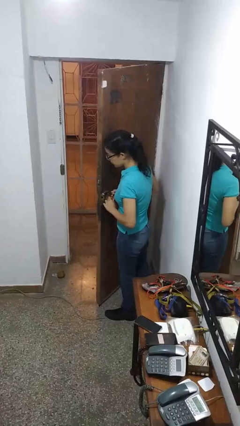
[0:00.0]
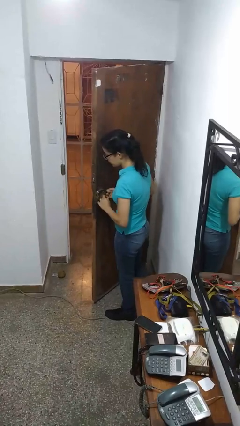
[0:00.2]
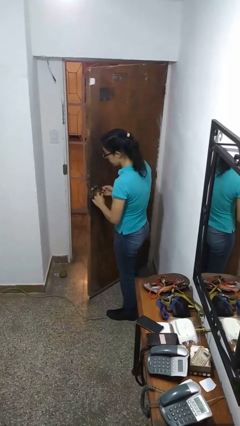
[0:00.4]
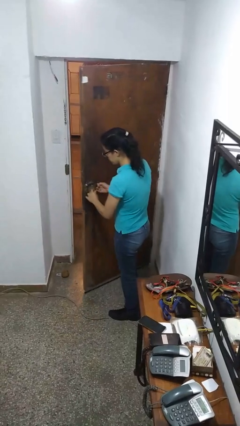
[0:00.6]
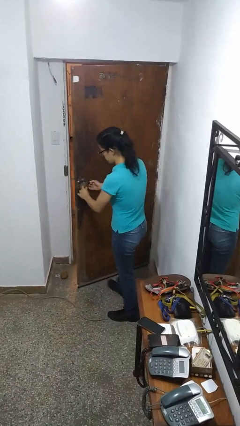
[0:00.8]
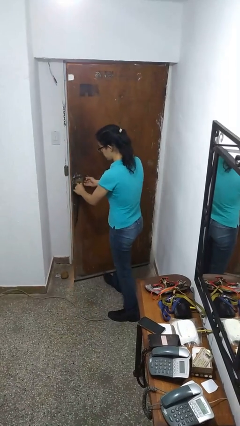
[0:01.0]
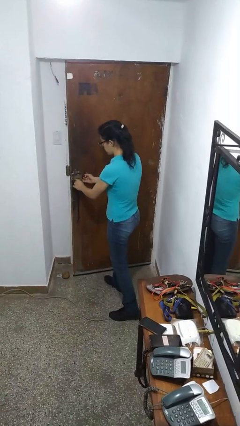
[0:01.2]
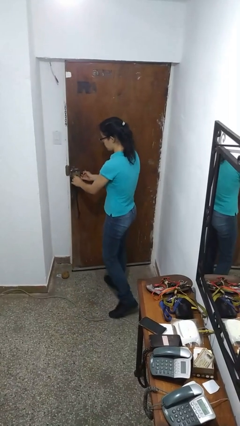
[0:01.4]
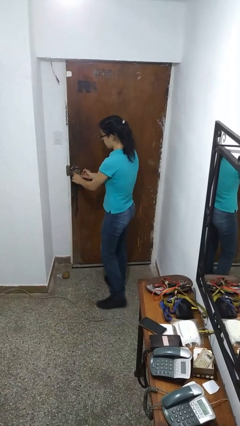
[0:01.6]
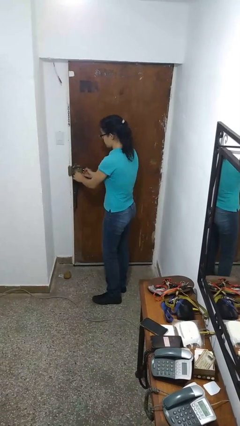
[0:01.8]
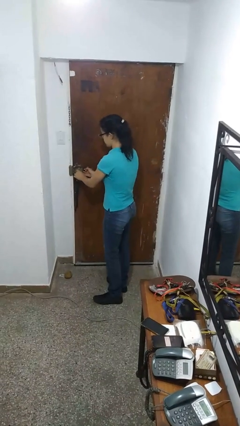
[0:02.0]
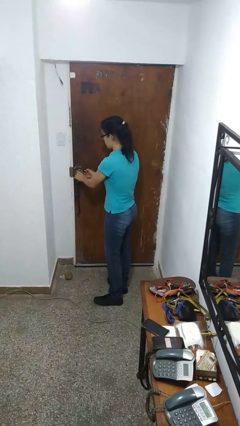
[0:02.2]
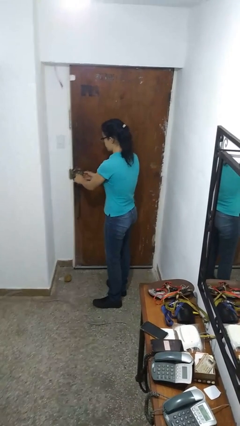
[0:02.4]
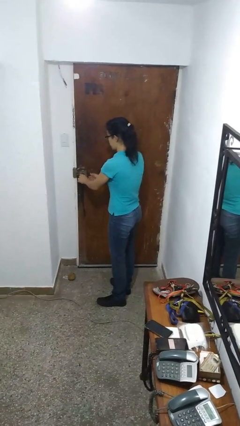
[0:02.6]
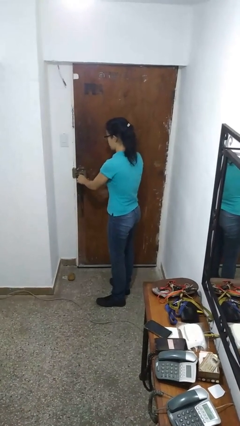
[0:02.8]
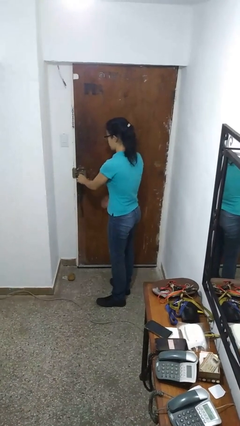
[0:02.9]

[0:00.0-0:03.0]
person closes facility door

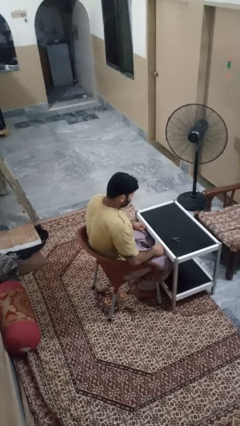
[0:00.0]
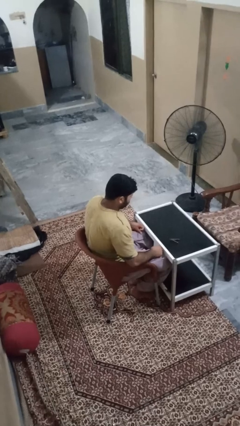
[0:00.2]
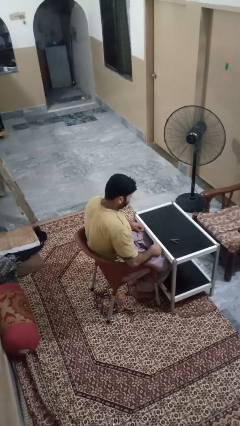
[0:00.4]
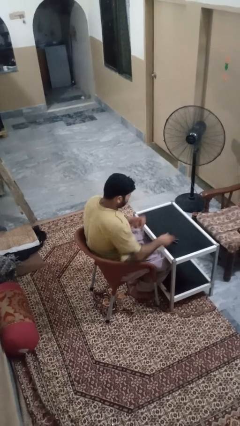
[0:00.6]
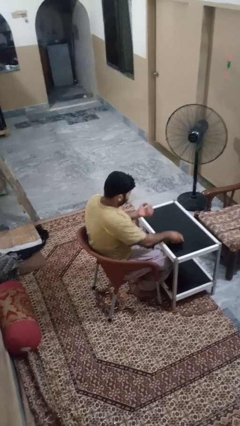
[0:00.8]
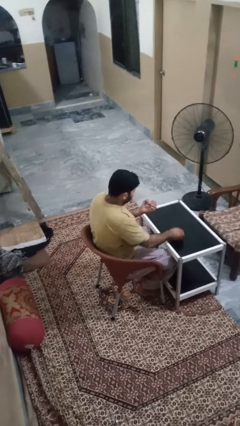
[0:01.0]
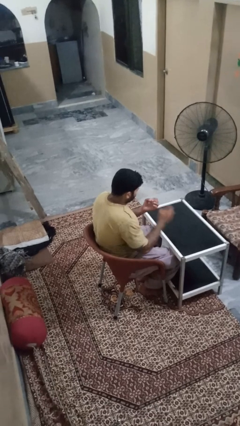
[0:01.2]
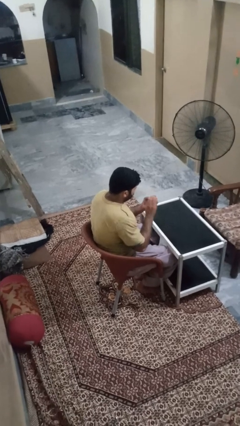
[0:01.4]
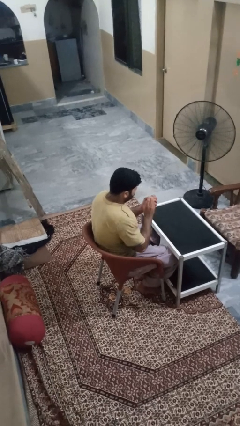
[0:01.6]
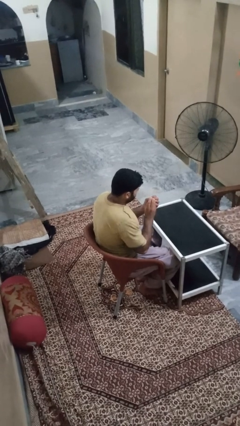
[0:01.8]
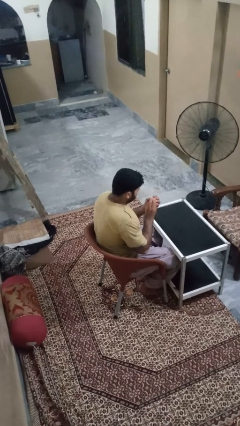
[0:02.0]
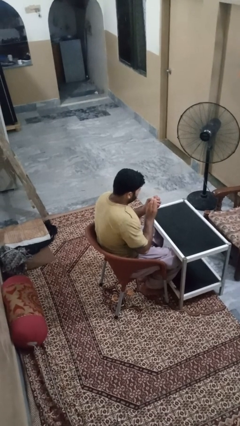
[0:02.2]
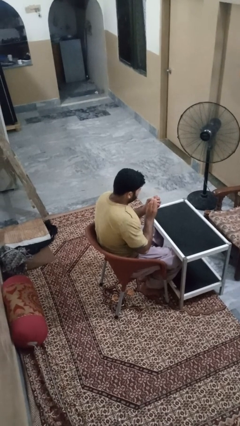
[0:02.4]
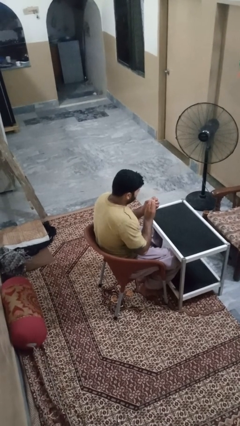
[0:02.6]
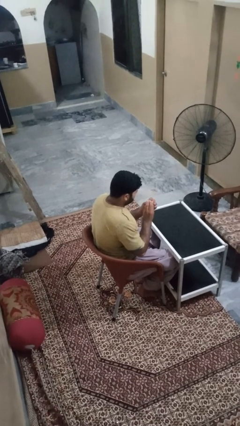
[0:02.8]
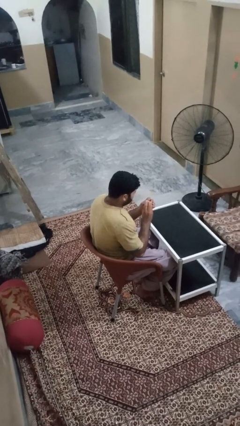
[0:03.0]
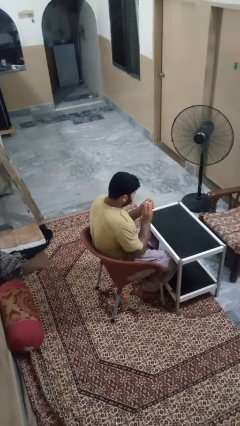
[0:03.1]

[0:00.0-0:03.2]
person clips fingernails

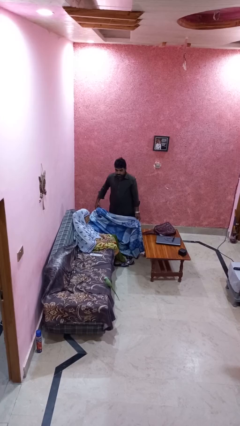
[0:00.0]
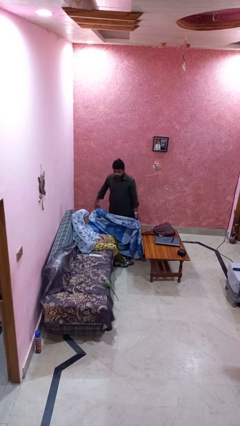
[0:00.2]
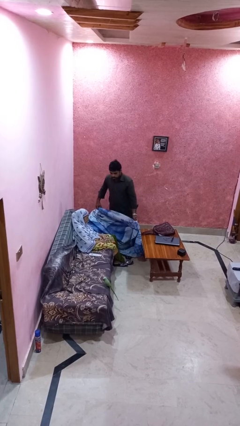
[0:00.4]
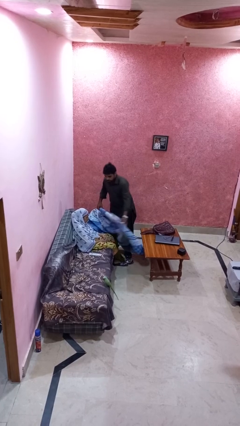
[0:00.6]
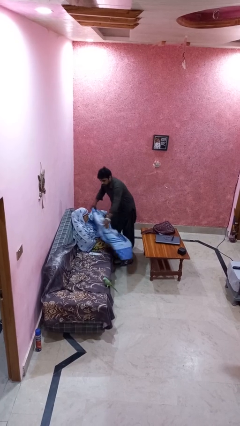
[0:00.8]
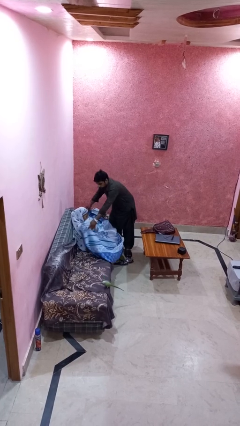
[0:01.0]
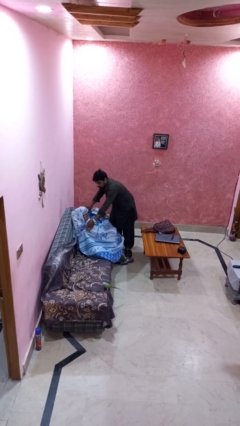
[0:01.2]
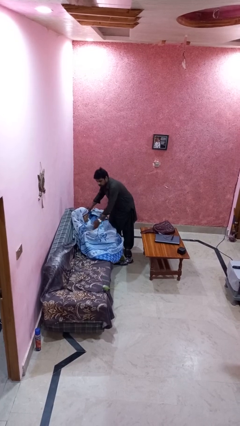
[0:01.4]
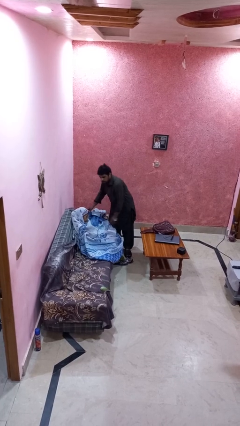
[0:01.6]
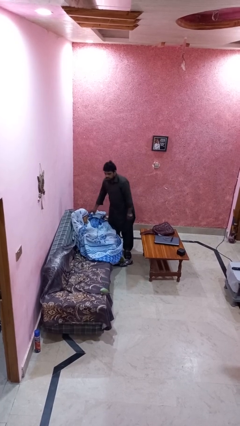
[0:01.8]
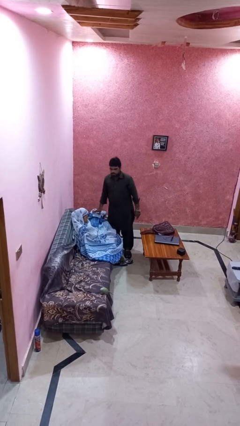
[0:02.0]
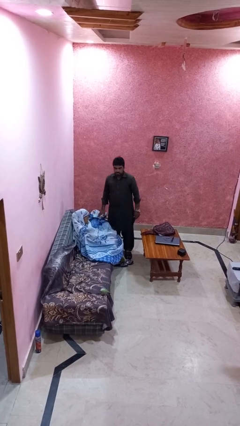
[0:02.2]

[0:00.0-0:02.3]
person covers friend with blanket

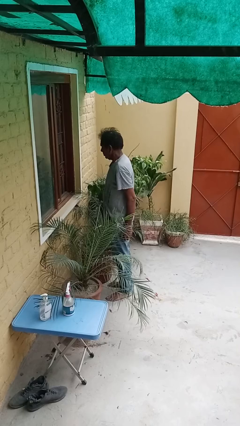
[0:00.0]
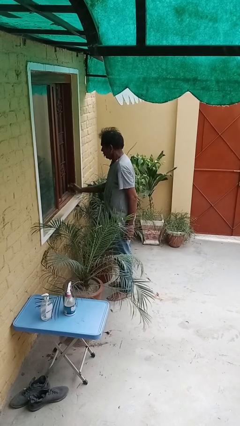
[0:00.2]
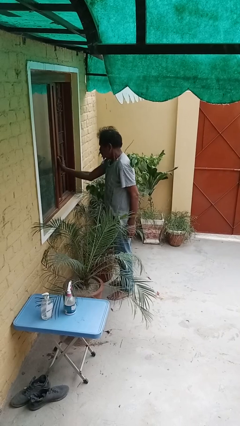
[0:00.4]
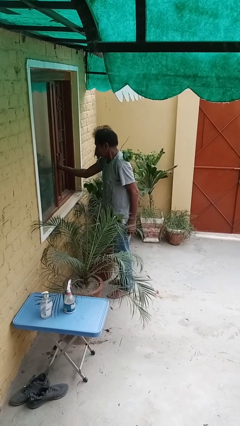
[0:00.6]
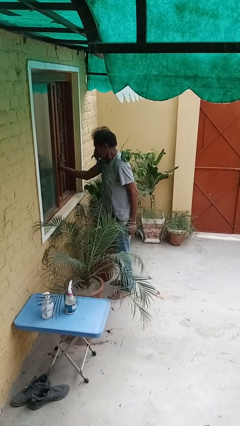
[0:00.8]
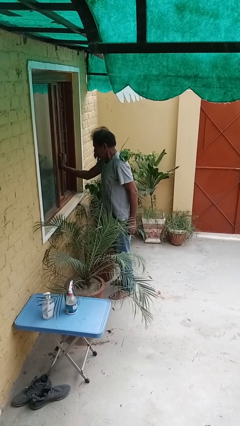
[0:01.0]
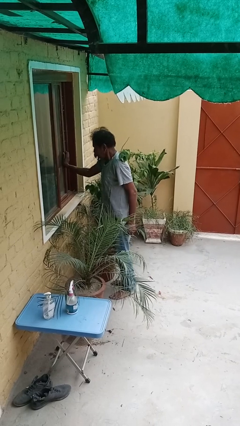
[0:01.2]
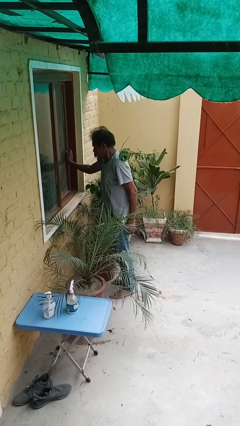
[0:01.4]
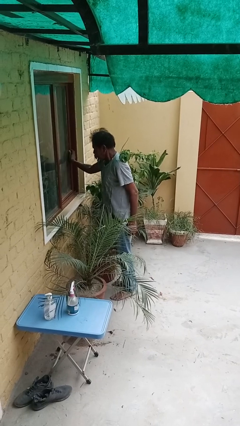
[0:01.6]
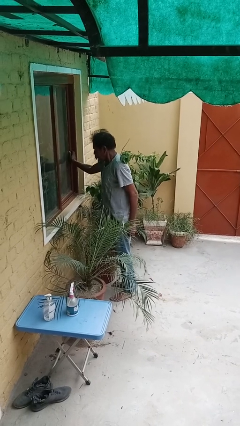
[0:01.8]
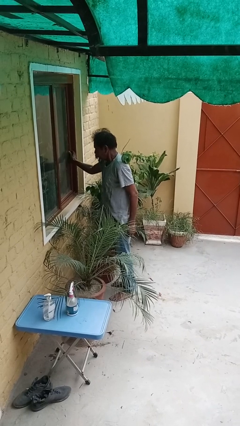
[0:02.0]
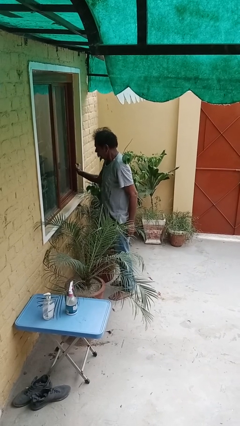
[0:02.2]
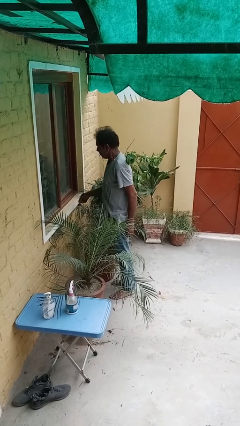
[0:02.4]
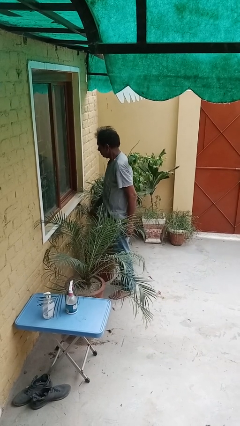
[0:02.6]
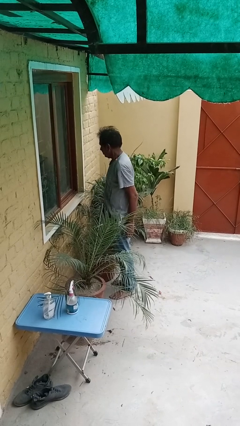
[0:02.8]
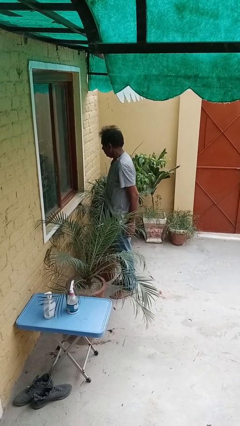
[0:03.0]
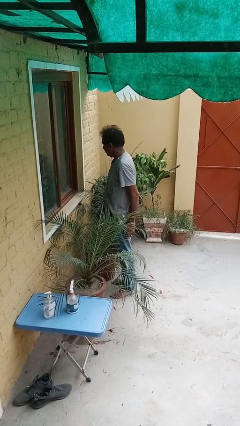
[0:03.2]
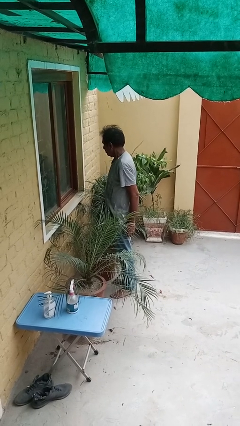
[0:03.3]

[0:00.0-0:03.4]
person closes home window

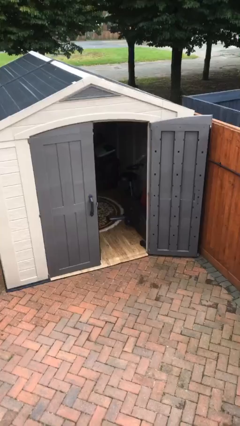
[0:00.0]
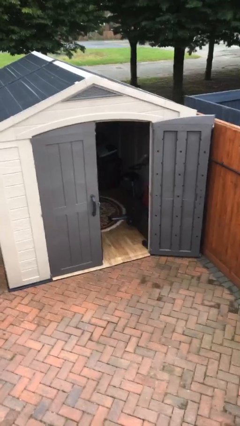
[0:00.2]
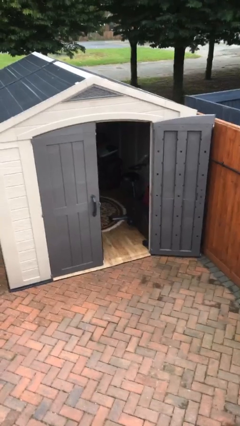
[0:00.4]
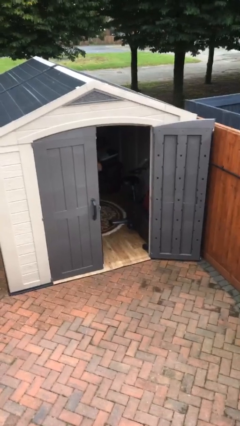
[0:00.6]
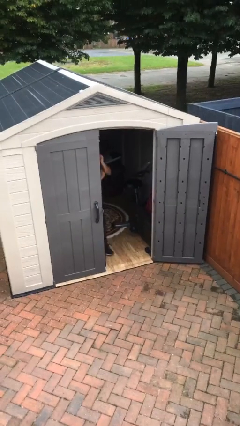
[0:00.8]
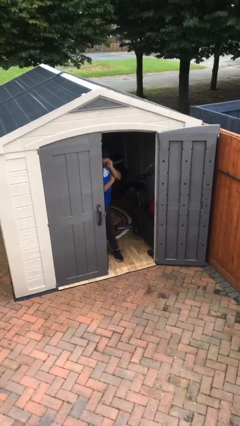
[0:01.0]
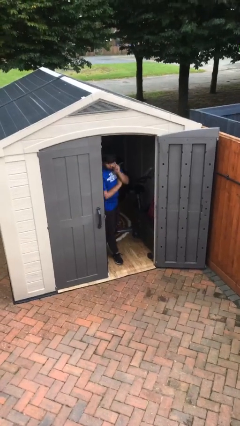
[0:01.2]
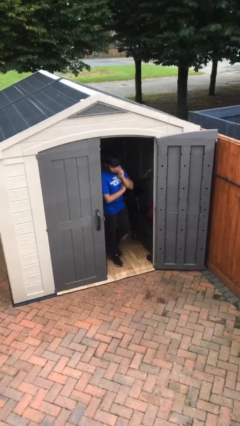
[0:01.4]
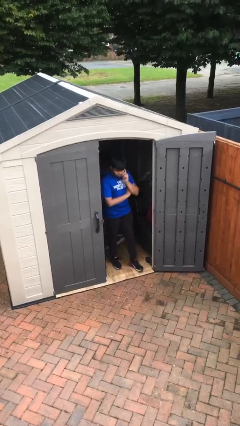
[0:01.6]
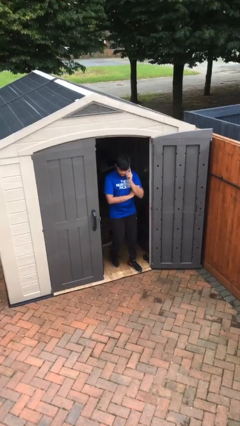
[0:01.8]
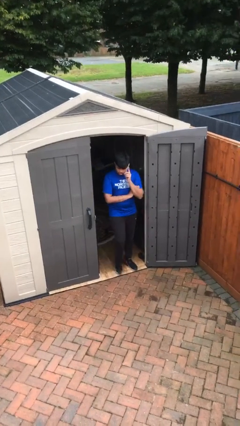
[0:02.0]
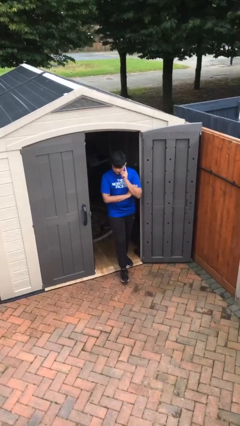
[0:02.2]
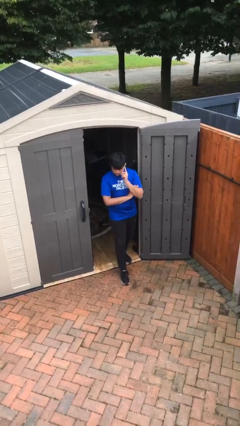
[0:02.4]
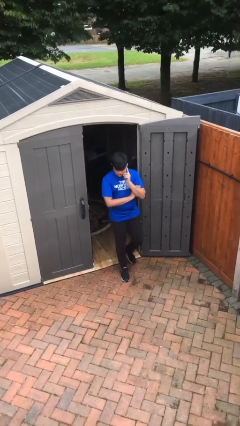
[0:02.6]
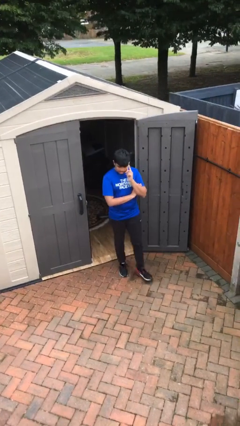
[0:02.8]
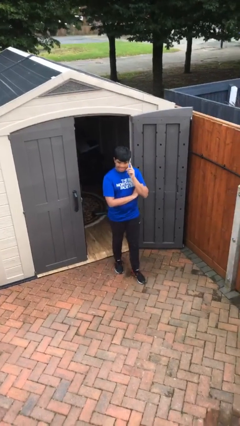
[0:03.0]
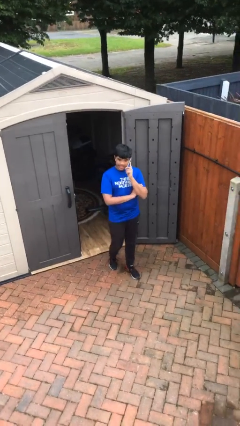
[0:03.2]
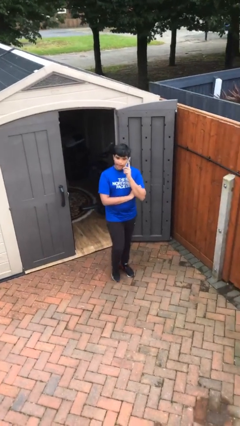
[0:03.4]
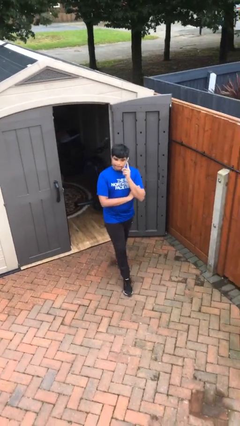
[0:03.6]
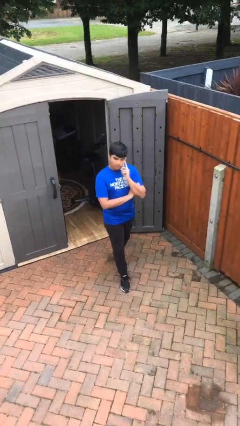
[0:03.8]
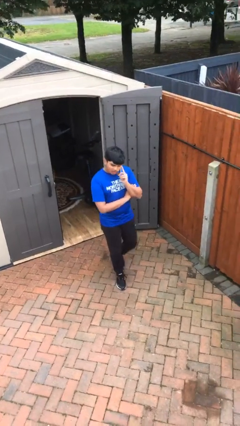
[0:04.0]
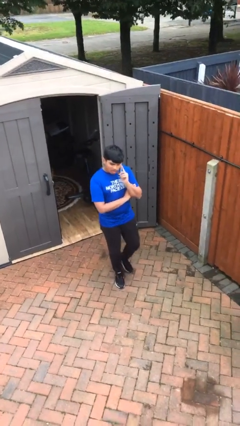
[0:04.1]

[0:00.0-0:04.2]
person enters scene through structure

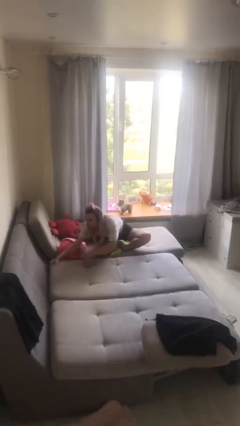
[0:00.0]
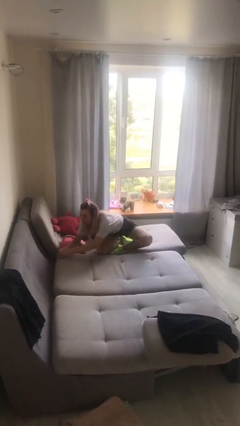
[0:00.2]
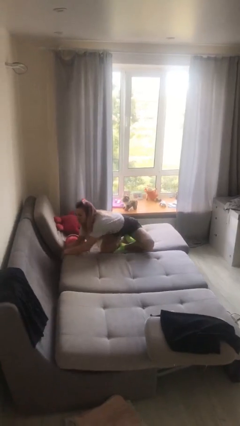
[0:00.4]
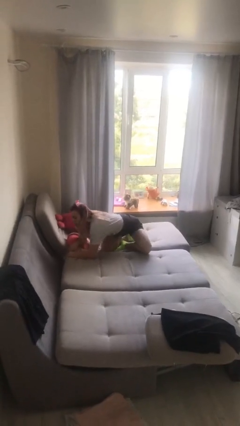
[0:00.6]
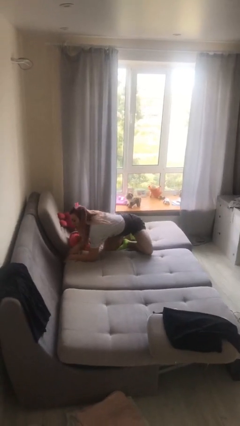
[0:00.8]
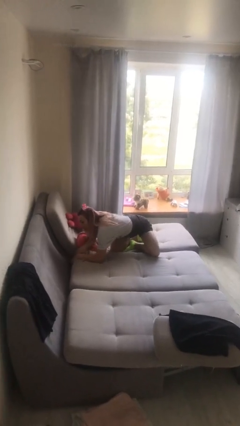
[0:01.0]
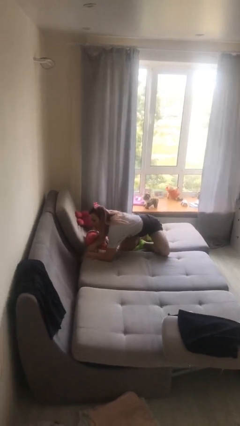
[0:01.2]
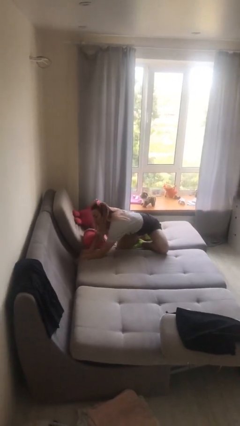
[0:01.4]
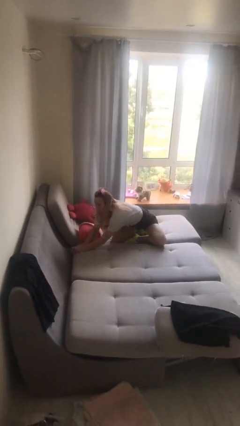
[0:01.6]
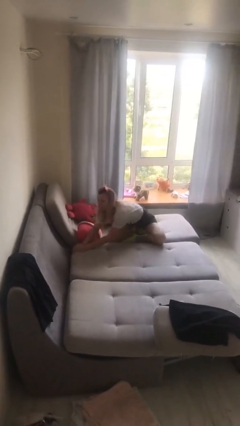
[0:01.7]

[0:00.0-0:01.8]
person searches under bed
